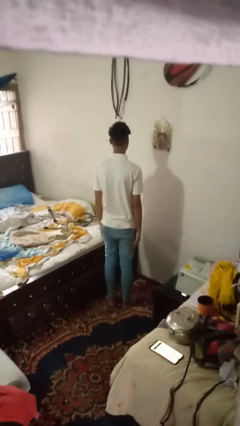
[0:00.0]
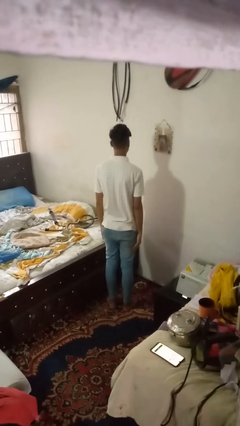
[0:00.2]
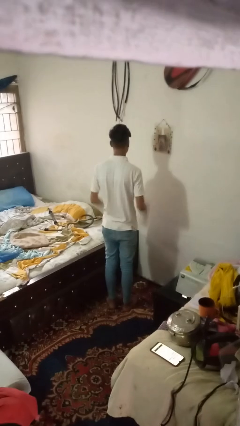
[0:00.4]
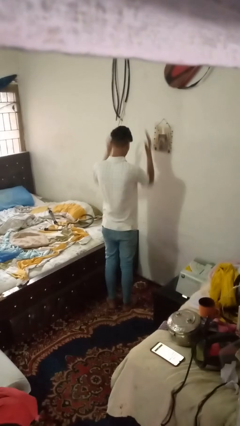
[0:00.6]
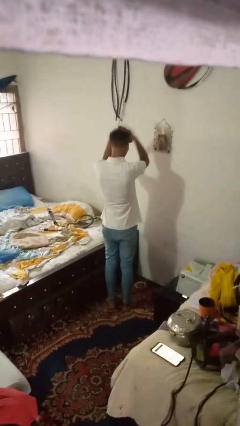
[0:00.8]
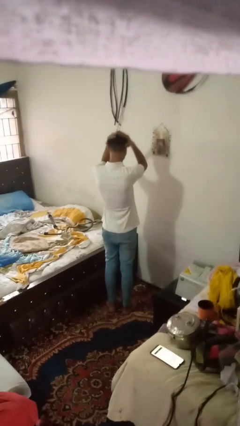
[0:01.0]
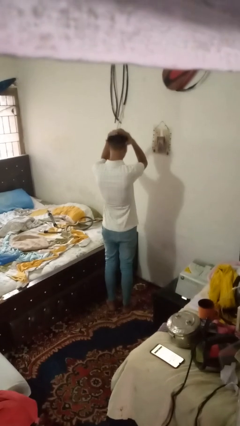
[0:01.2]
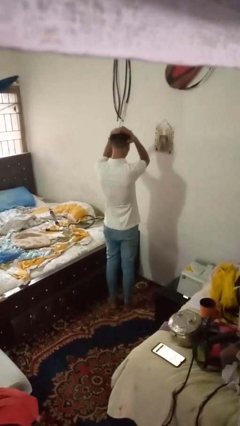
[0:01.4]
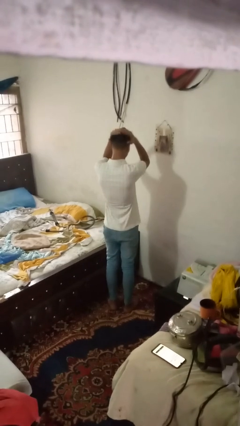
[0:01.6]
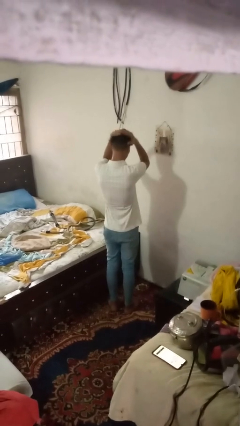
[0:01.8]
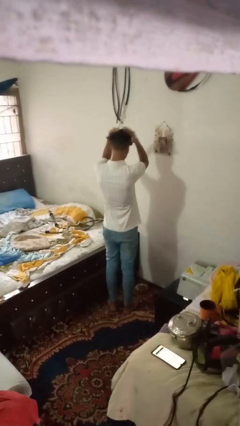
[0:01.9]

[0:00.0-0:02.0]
person pats head

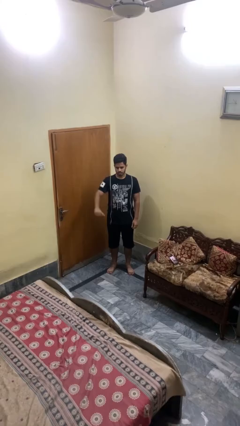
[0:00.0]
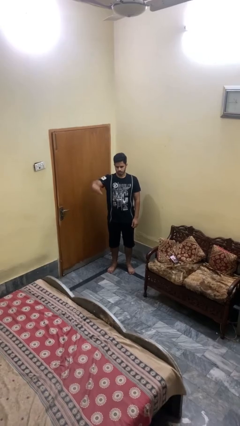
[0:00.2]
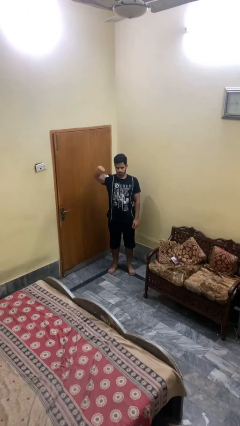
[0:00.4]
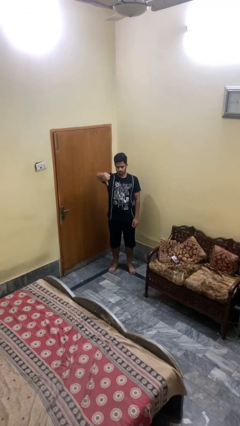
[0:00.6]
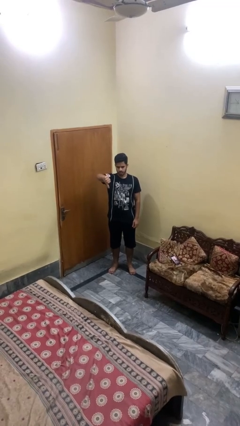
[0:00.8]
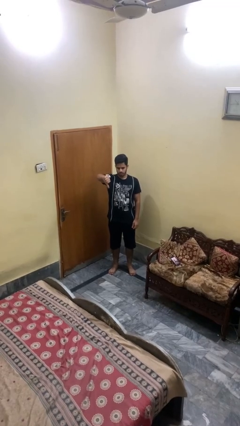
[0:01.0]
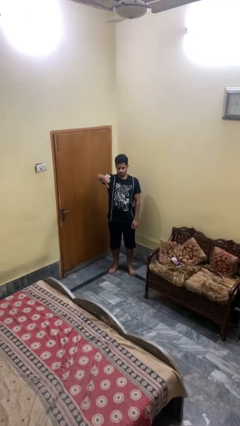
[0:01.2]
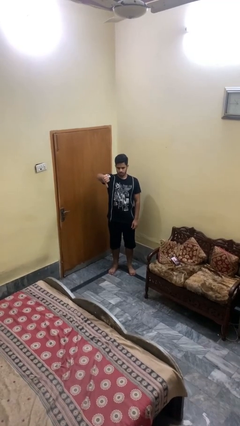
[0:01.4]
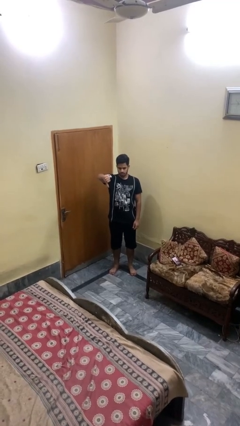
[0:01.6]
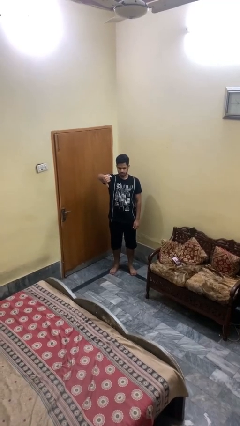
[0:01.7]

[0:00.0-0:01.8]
person gestures thumbs down

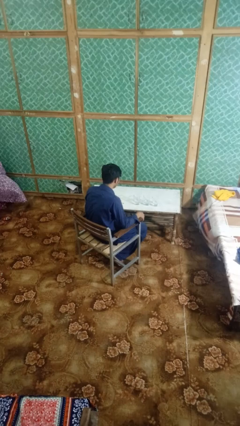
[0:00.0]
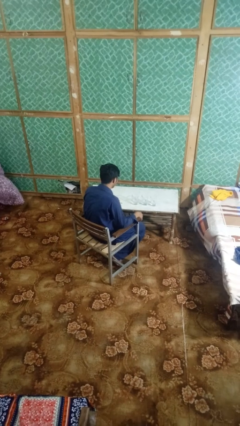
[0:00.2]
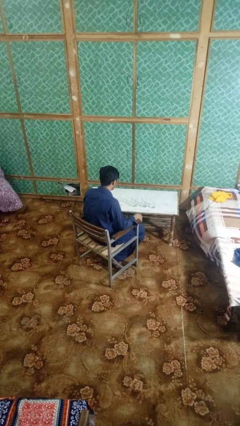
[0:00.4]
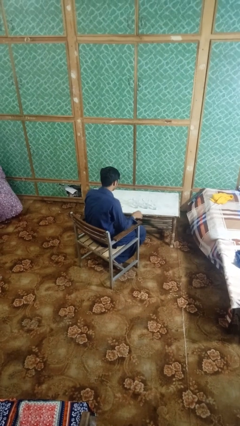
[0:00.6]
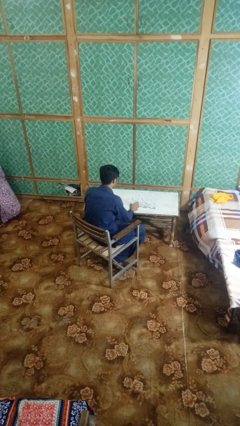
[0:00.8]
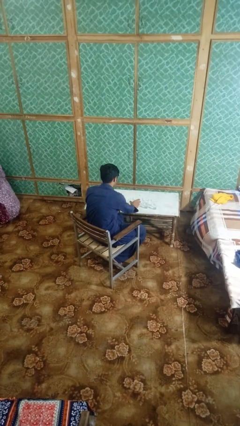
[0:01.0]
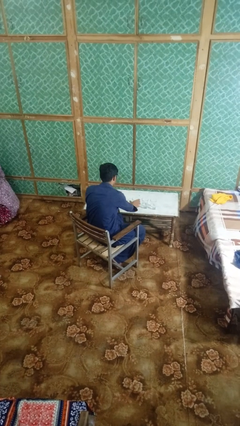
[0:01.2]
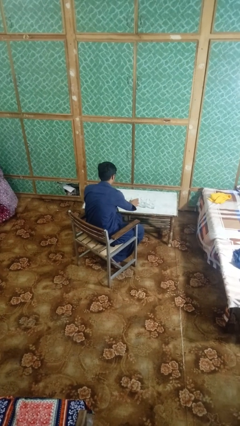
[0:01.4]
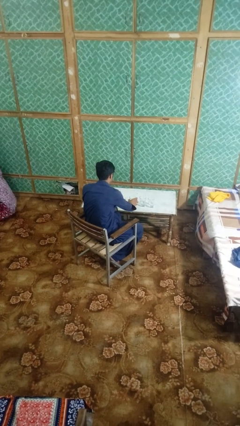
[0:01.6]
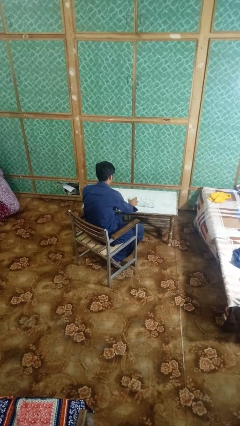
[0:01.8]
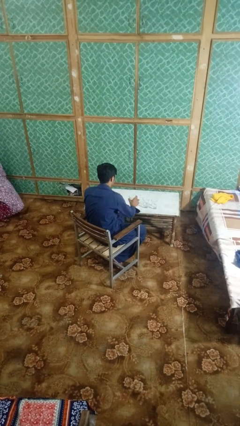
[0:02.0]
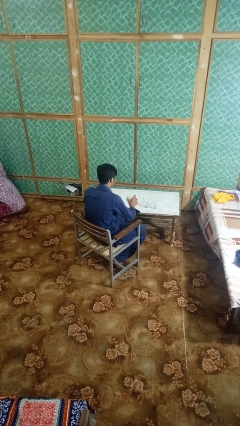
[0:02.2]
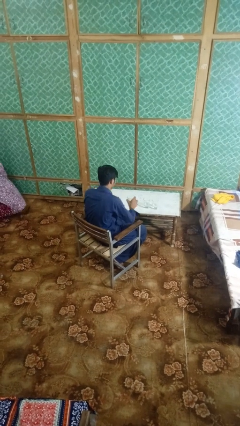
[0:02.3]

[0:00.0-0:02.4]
person picks up object from table

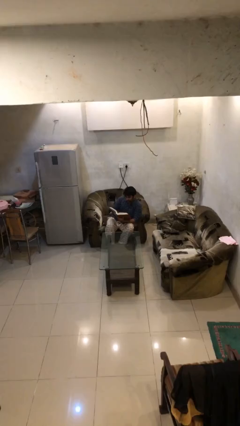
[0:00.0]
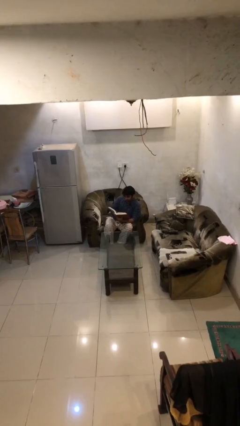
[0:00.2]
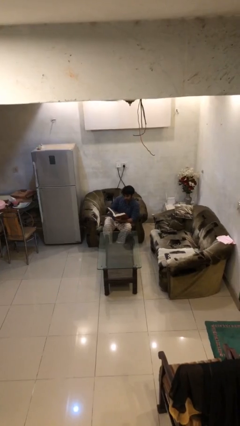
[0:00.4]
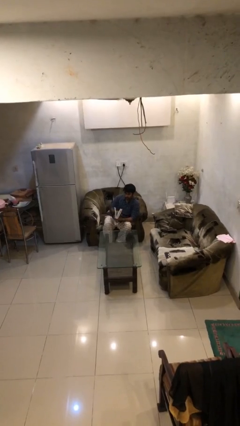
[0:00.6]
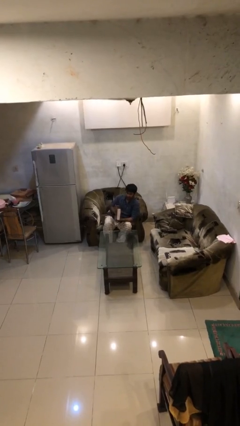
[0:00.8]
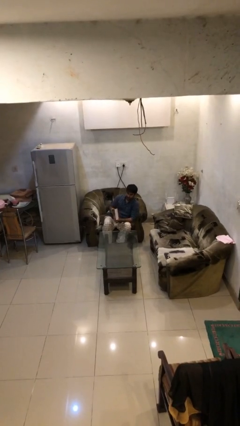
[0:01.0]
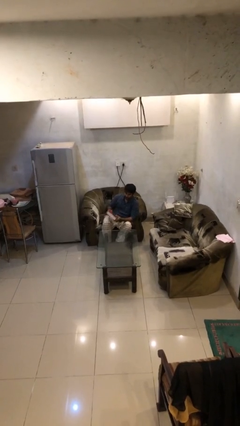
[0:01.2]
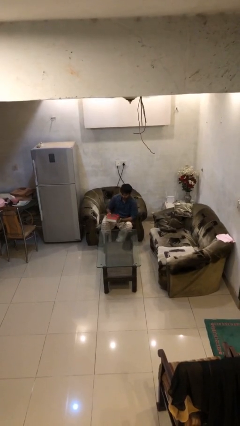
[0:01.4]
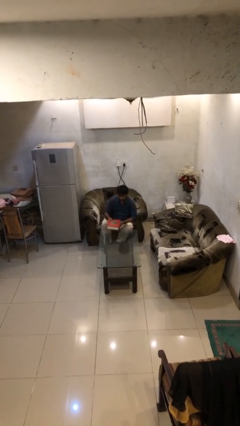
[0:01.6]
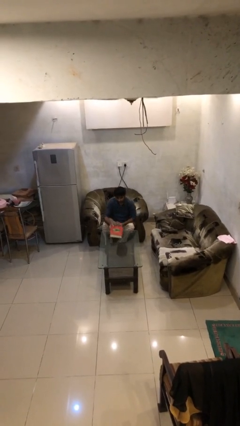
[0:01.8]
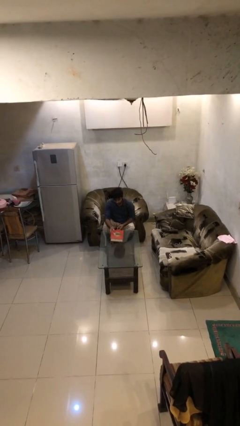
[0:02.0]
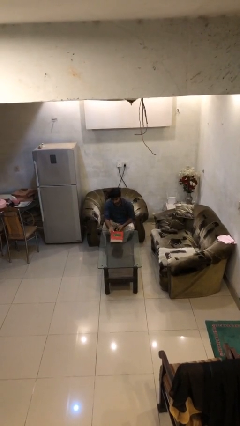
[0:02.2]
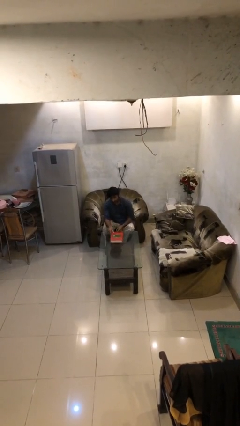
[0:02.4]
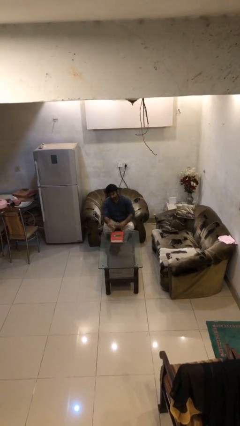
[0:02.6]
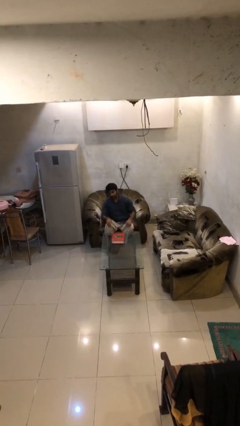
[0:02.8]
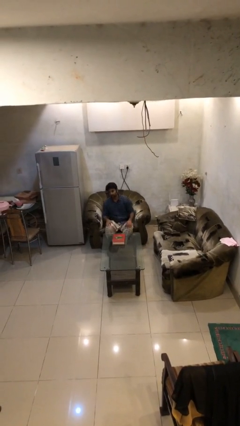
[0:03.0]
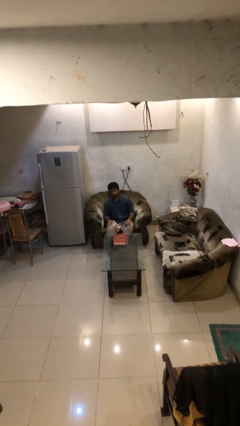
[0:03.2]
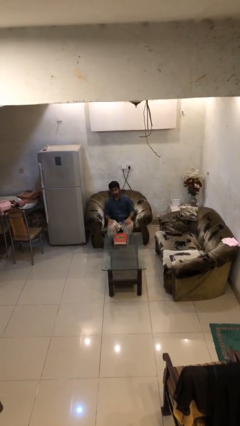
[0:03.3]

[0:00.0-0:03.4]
person puts down object on table

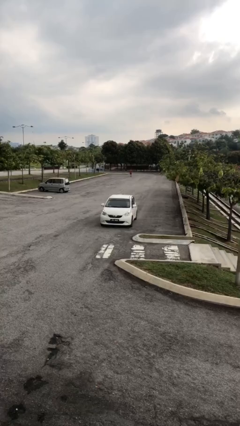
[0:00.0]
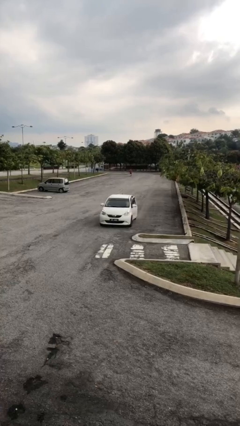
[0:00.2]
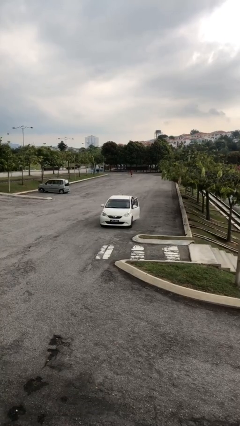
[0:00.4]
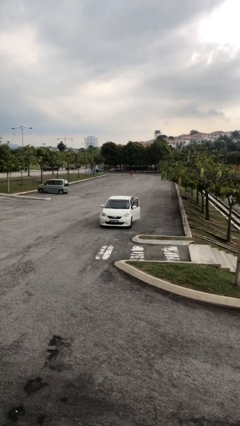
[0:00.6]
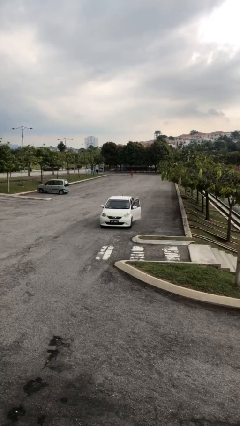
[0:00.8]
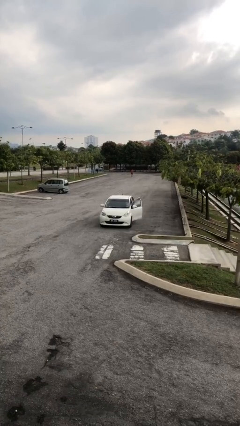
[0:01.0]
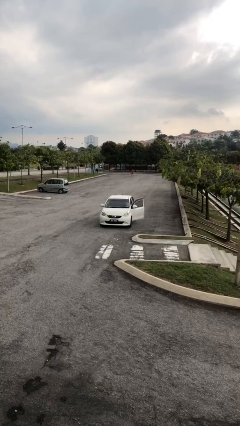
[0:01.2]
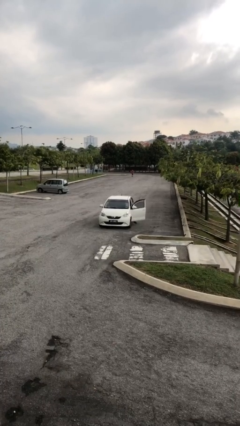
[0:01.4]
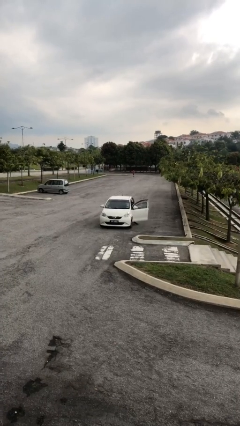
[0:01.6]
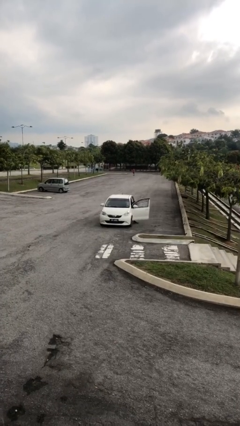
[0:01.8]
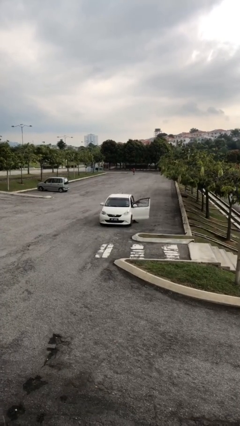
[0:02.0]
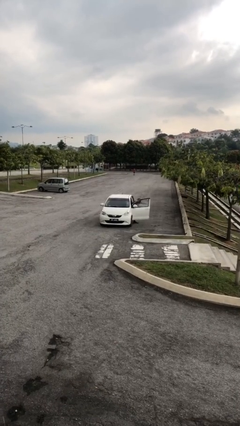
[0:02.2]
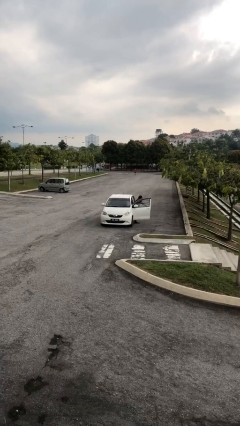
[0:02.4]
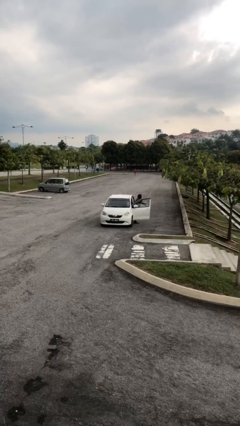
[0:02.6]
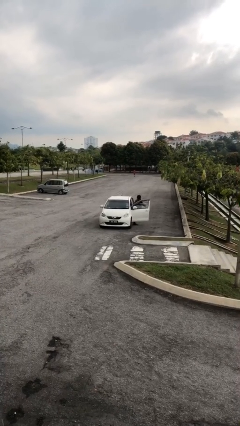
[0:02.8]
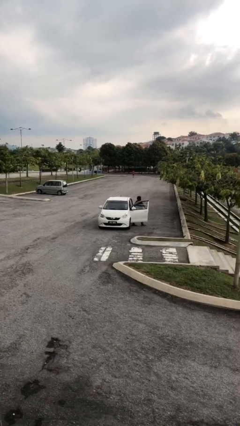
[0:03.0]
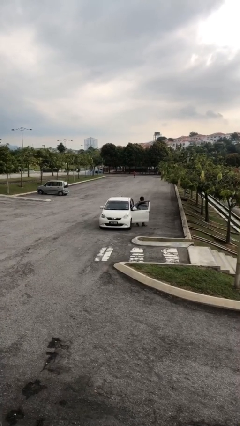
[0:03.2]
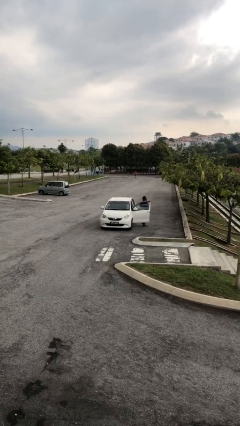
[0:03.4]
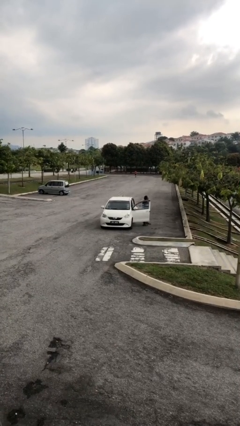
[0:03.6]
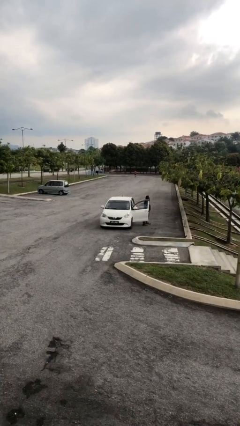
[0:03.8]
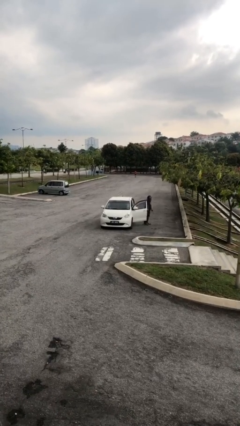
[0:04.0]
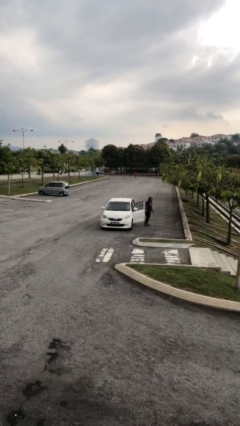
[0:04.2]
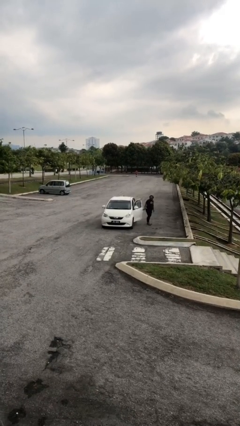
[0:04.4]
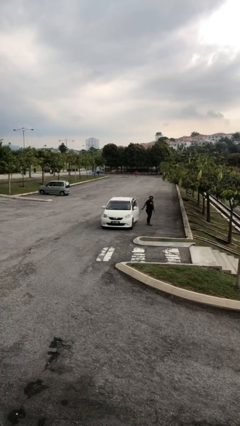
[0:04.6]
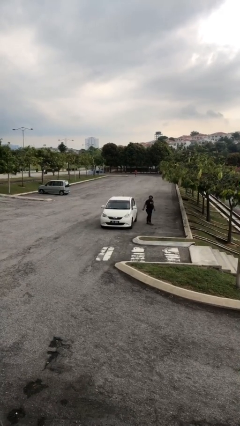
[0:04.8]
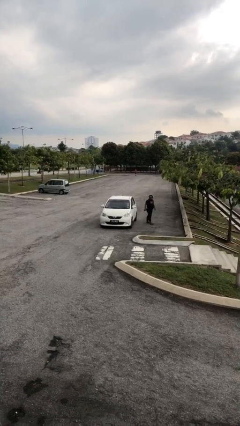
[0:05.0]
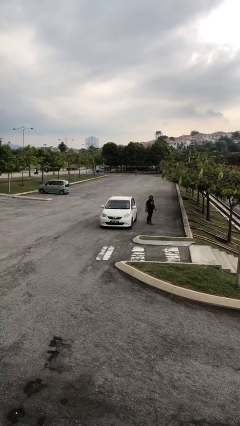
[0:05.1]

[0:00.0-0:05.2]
car drops off person

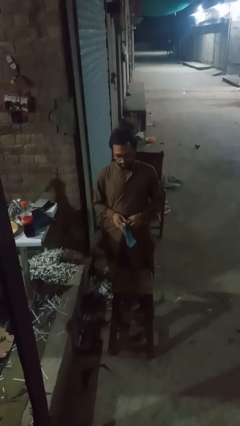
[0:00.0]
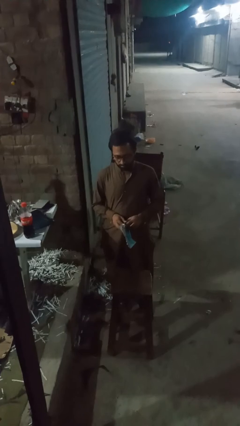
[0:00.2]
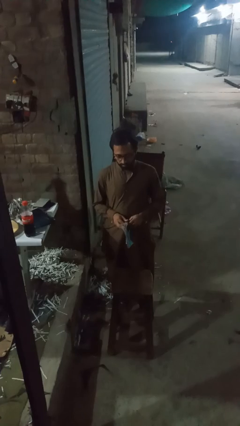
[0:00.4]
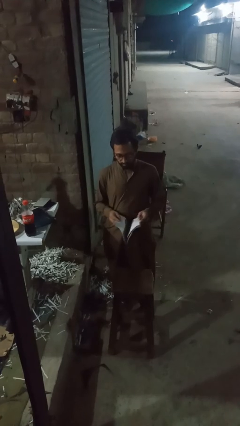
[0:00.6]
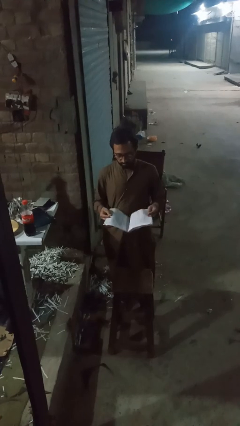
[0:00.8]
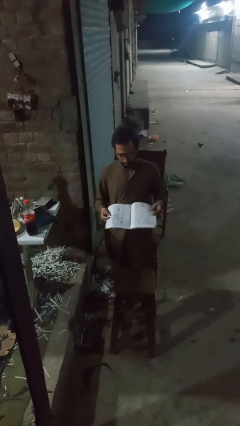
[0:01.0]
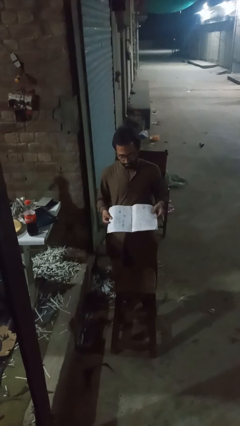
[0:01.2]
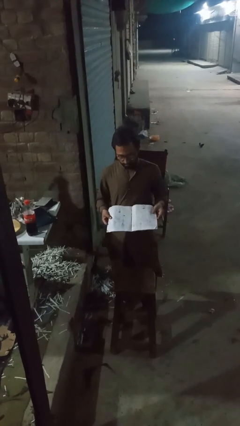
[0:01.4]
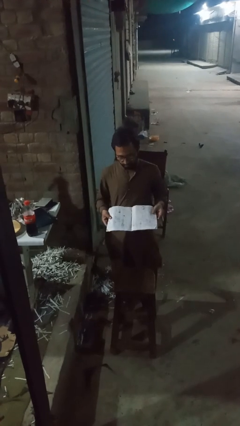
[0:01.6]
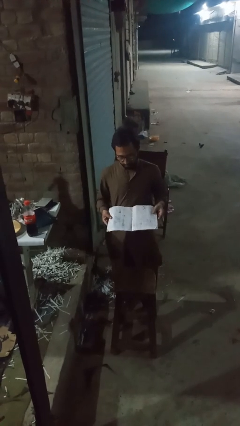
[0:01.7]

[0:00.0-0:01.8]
person reads newspaper

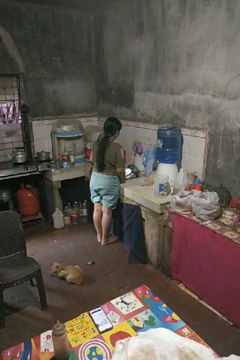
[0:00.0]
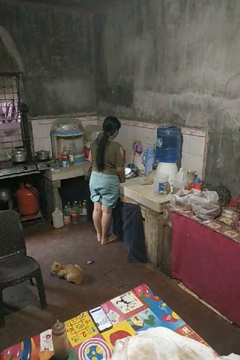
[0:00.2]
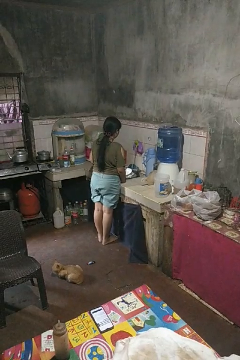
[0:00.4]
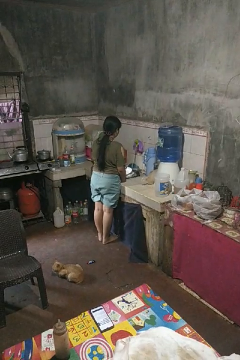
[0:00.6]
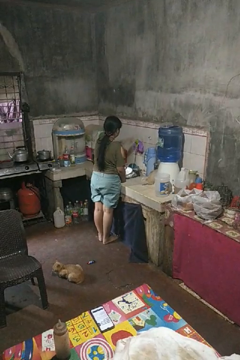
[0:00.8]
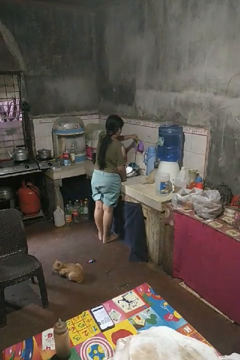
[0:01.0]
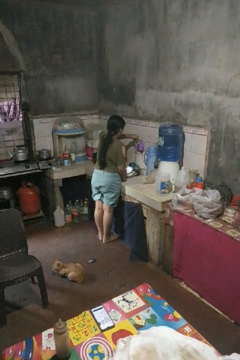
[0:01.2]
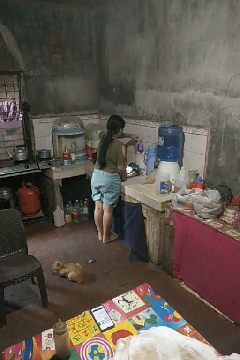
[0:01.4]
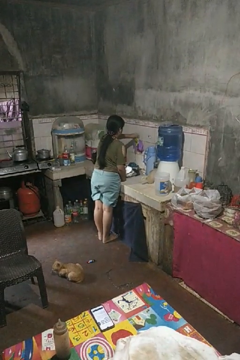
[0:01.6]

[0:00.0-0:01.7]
person turns off faucet
